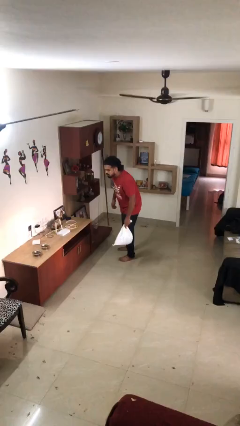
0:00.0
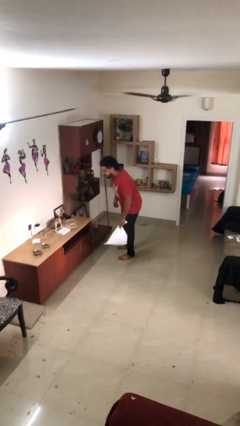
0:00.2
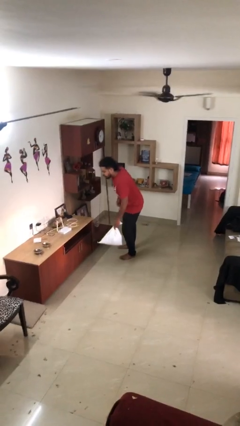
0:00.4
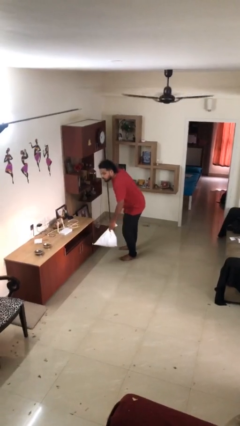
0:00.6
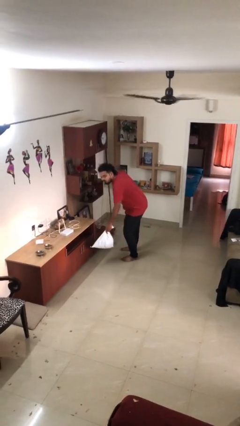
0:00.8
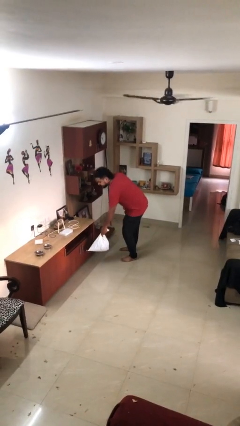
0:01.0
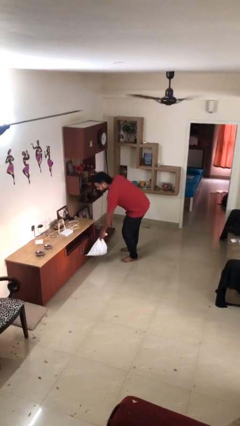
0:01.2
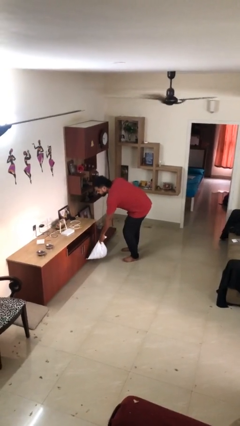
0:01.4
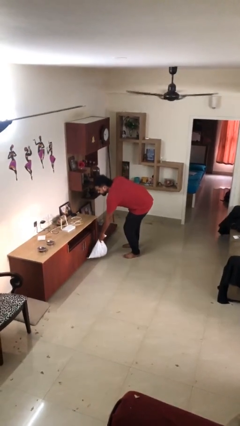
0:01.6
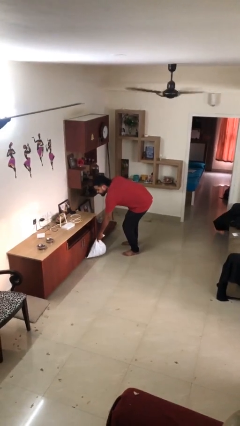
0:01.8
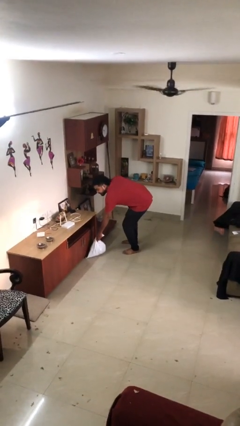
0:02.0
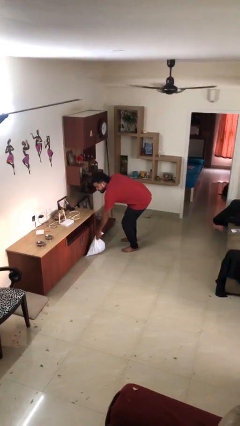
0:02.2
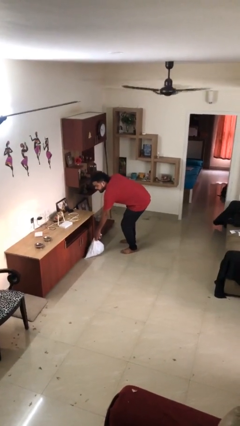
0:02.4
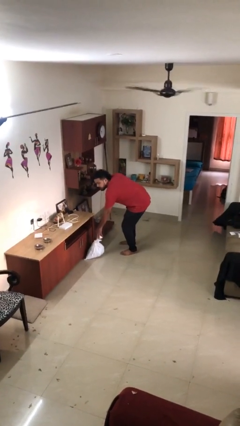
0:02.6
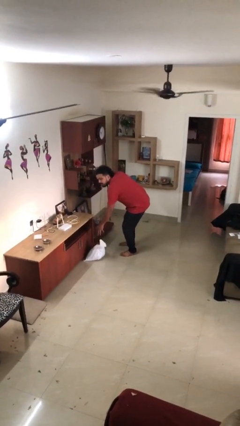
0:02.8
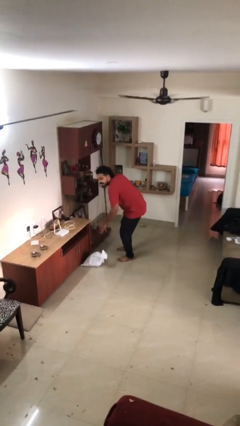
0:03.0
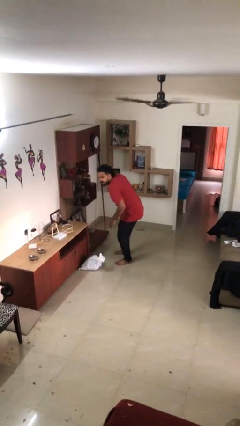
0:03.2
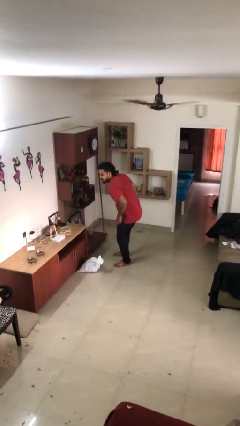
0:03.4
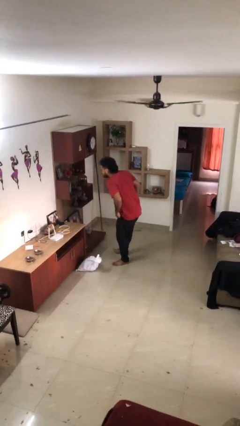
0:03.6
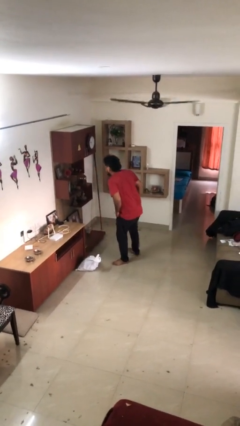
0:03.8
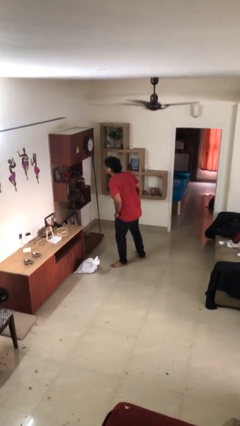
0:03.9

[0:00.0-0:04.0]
person puts down object on floor

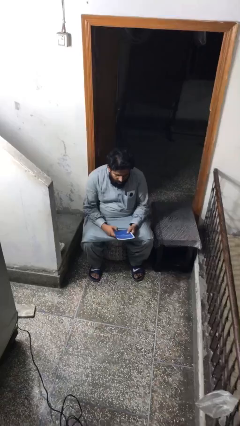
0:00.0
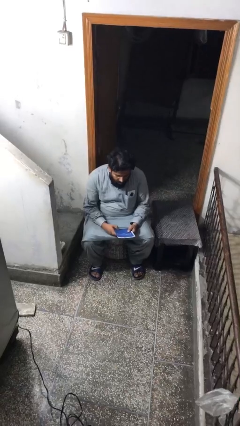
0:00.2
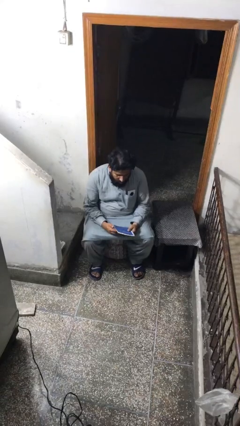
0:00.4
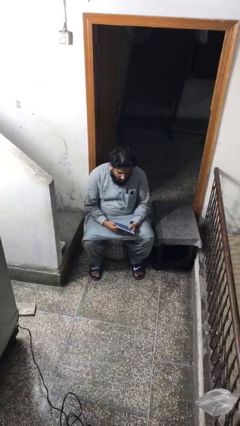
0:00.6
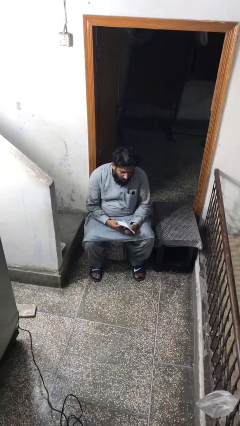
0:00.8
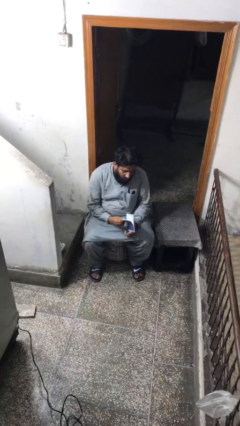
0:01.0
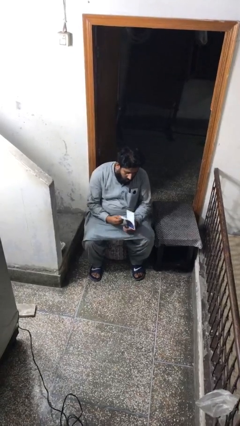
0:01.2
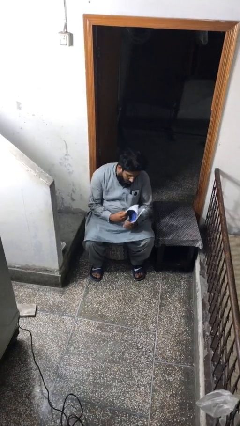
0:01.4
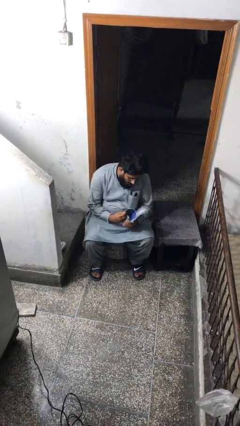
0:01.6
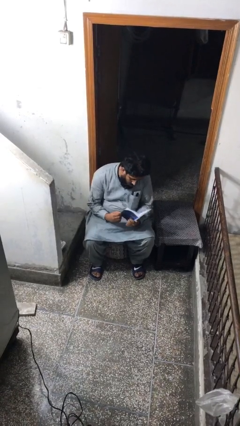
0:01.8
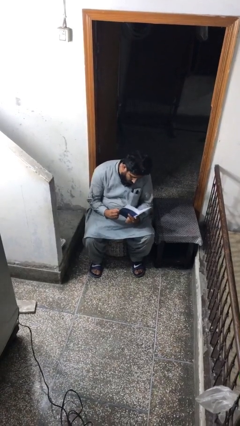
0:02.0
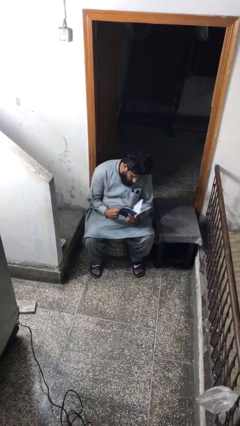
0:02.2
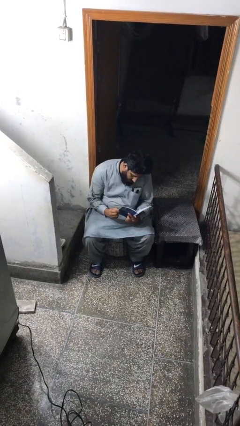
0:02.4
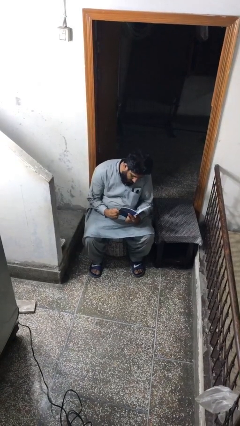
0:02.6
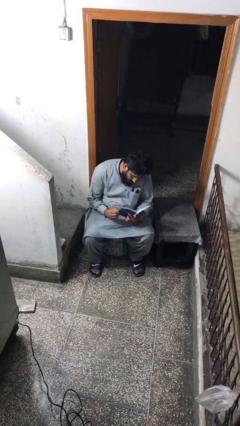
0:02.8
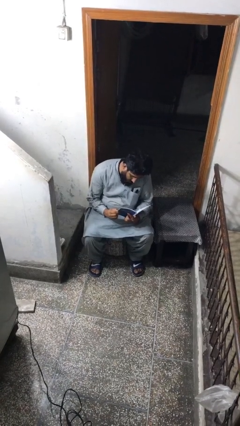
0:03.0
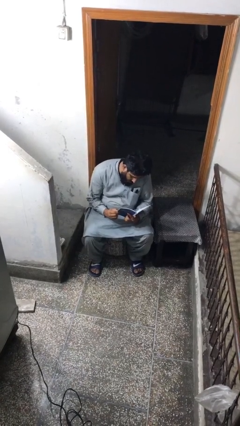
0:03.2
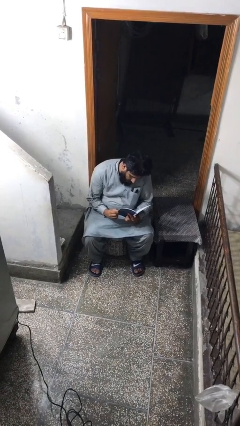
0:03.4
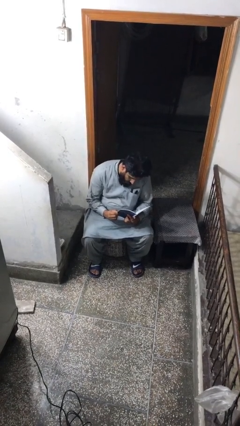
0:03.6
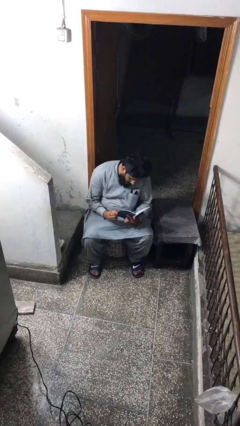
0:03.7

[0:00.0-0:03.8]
person reads document

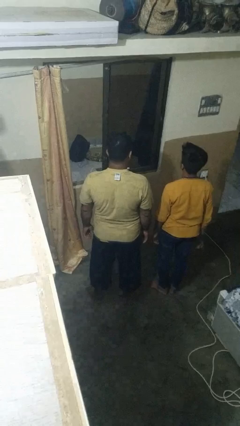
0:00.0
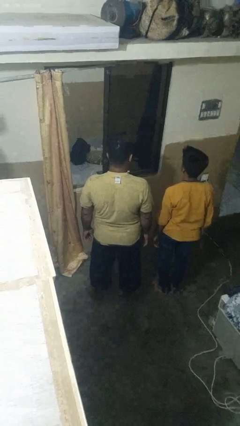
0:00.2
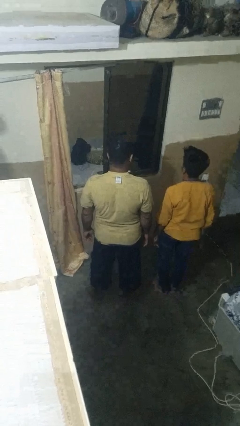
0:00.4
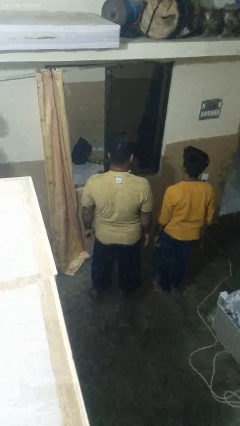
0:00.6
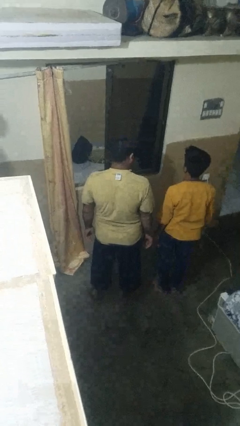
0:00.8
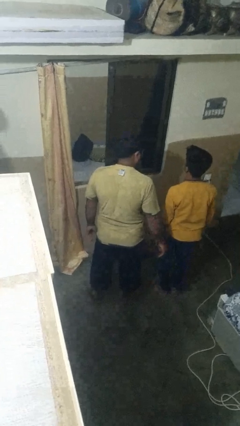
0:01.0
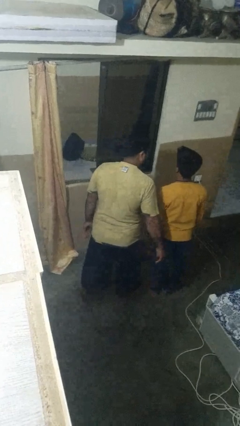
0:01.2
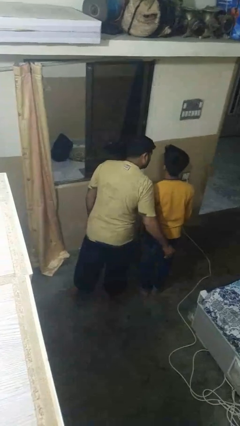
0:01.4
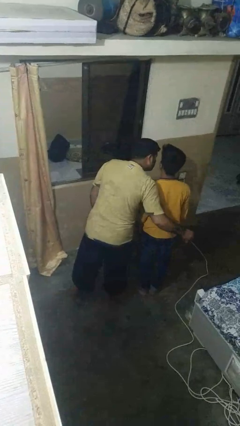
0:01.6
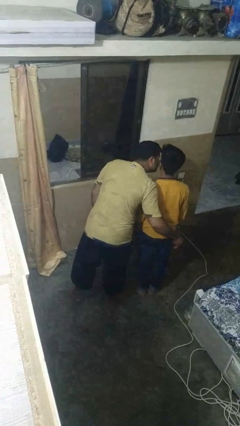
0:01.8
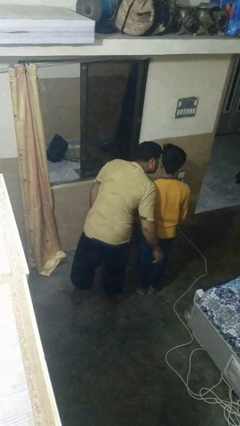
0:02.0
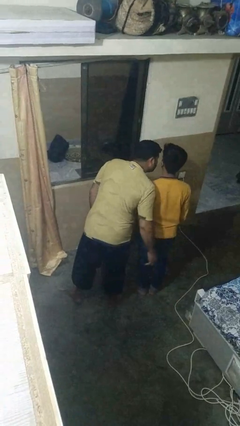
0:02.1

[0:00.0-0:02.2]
person kisses cheek of person

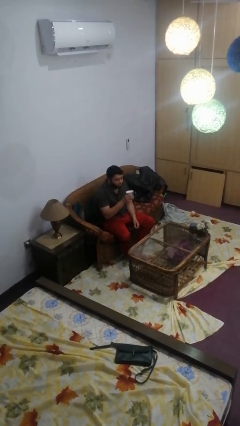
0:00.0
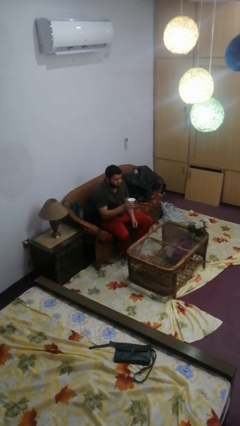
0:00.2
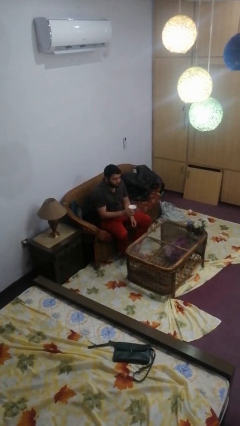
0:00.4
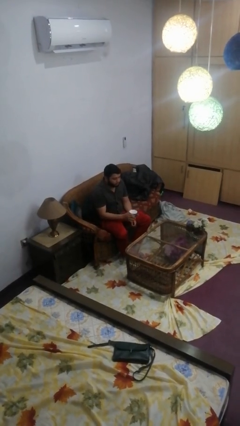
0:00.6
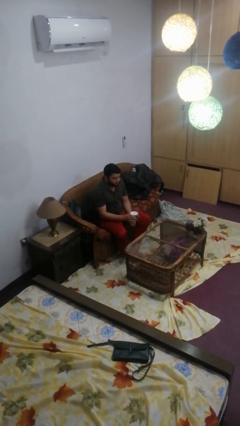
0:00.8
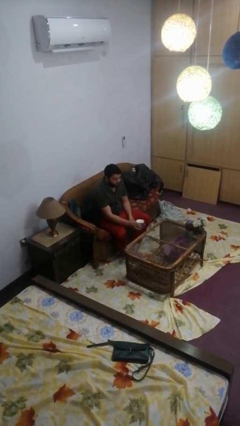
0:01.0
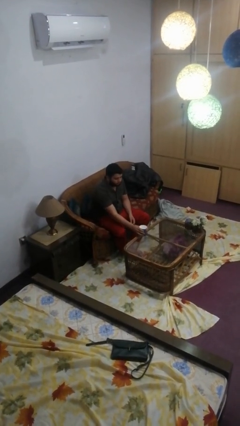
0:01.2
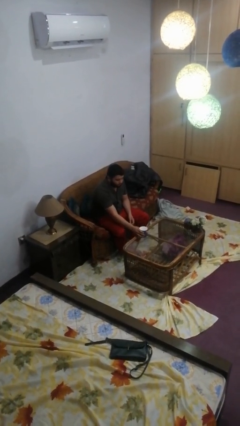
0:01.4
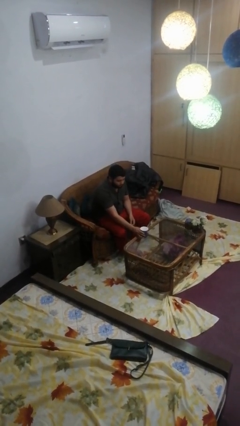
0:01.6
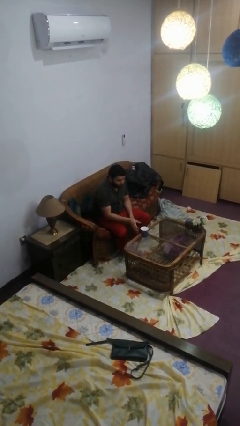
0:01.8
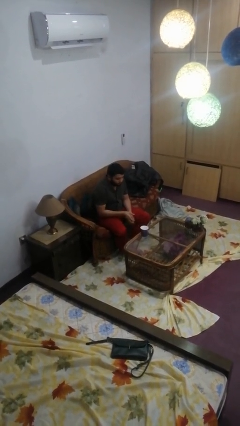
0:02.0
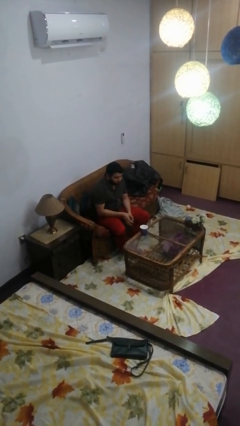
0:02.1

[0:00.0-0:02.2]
person puts down object on table

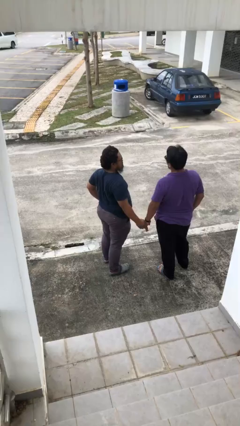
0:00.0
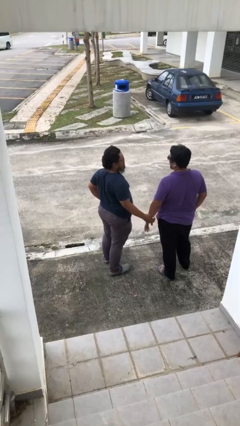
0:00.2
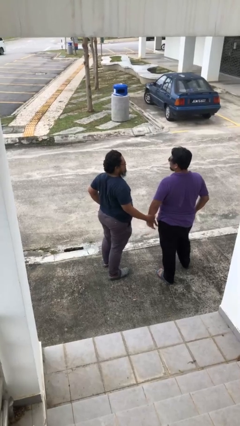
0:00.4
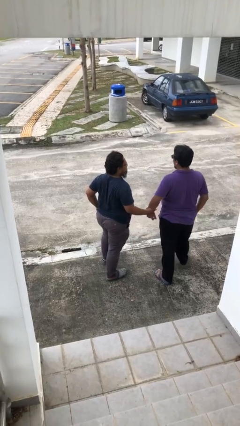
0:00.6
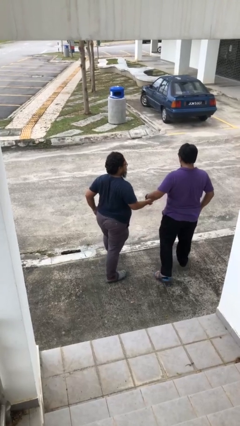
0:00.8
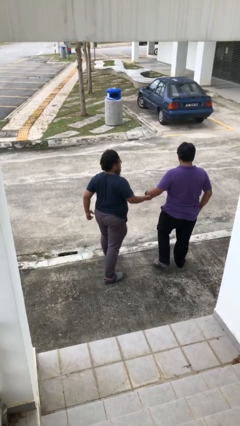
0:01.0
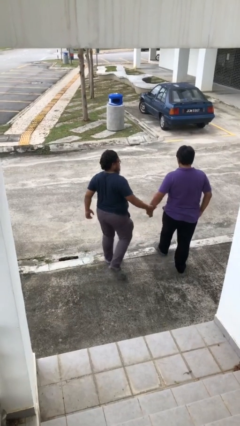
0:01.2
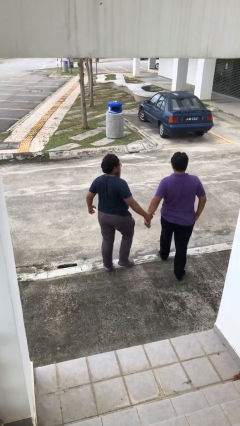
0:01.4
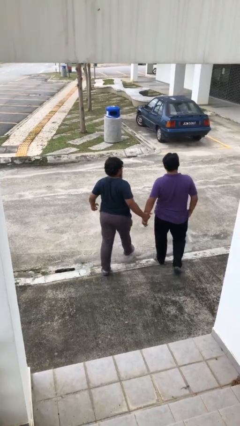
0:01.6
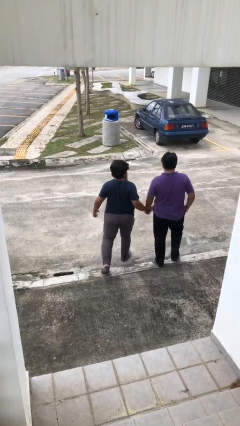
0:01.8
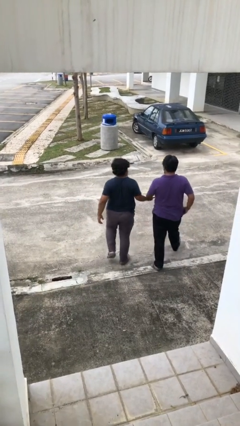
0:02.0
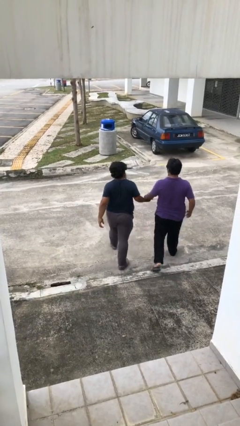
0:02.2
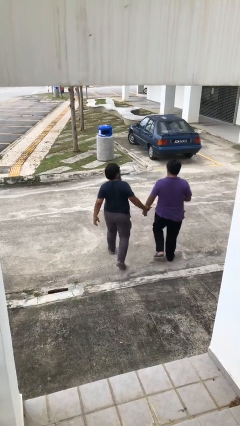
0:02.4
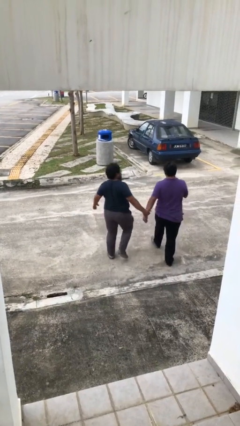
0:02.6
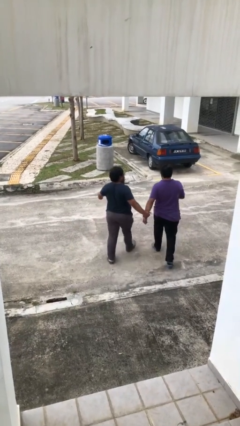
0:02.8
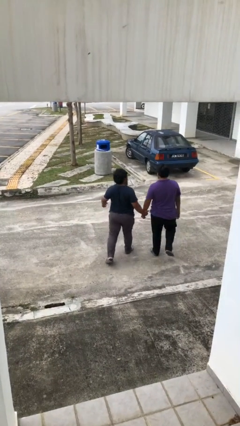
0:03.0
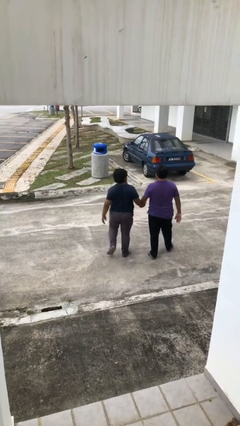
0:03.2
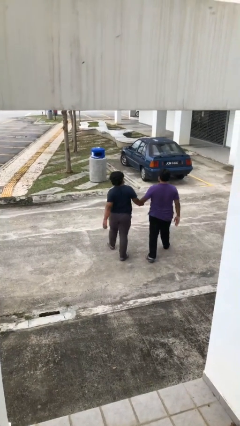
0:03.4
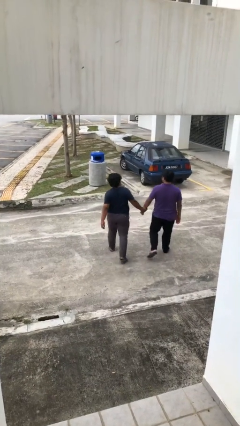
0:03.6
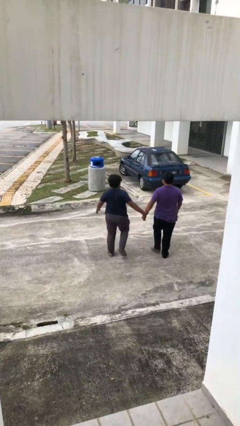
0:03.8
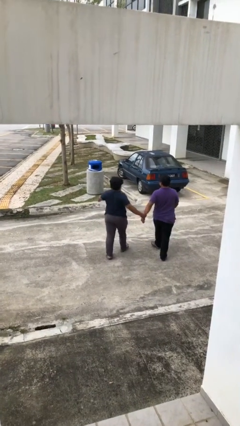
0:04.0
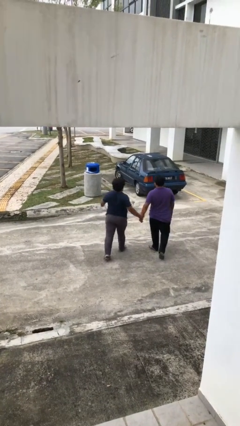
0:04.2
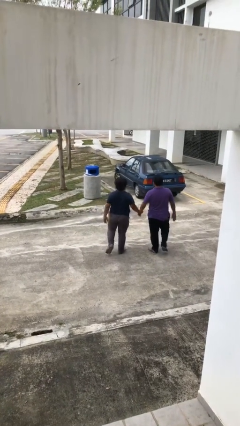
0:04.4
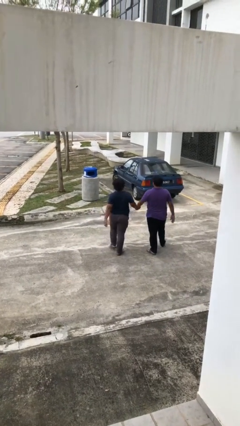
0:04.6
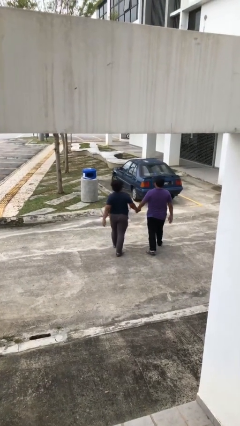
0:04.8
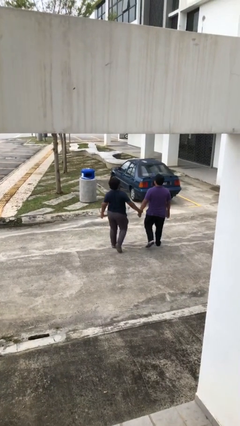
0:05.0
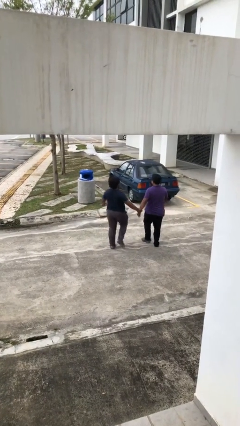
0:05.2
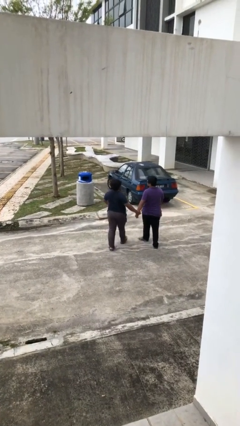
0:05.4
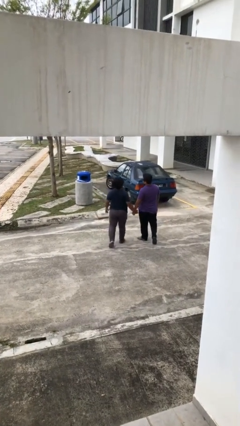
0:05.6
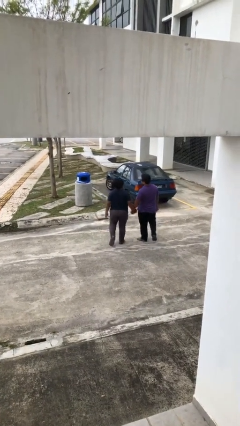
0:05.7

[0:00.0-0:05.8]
person holds hand
